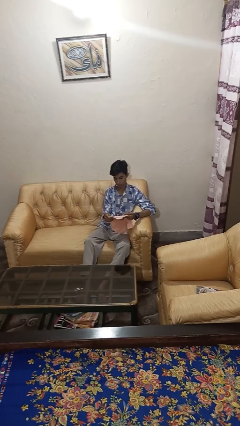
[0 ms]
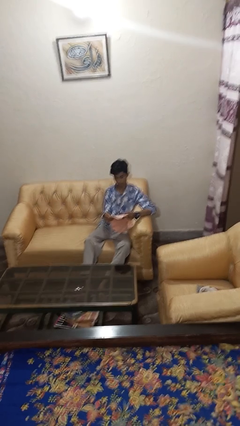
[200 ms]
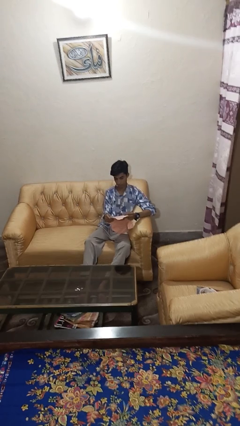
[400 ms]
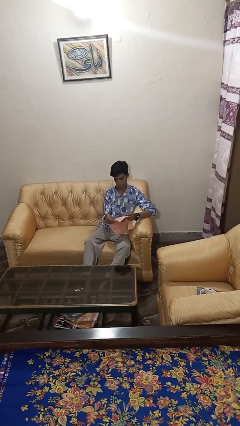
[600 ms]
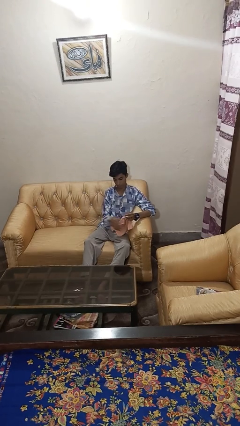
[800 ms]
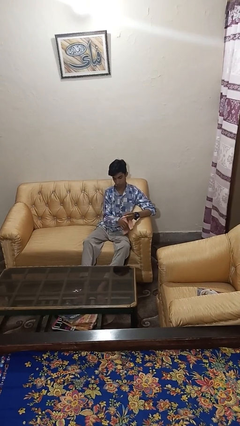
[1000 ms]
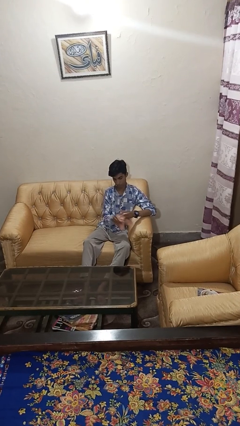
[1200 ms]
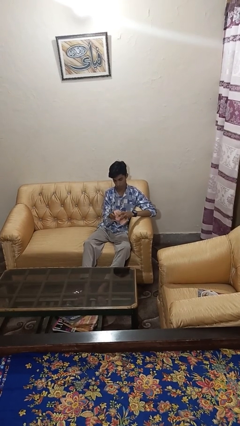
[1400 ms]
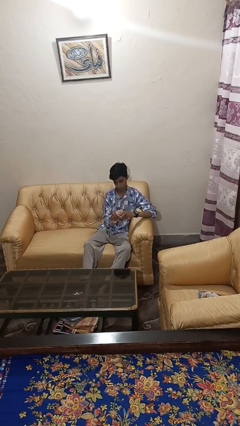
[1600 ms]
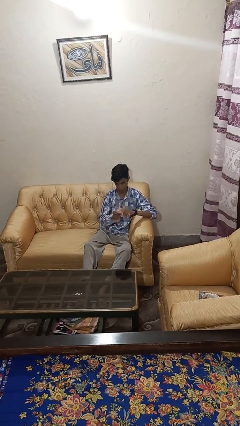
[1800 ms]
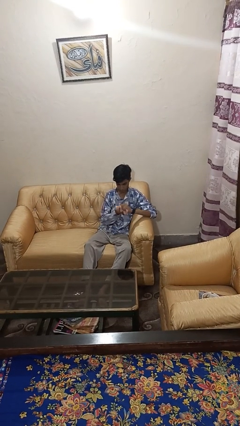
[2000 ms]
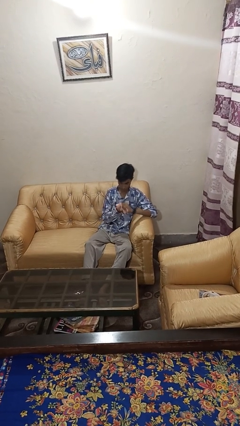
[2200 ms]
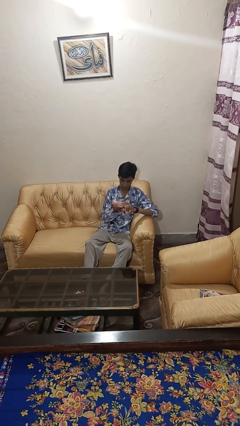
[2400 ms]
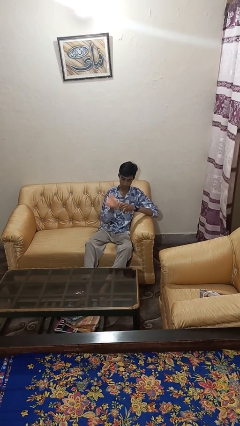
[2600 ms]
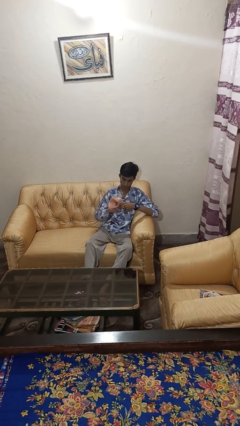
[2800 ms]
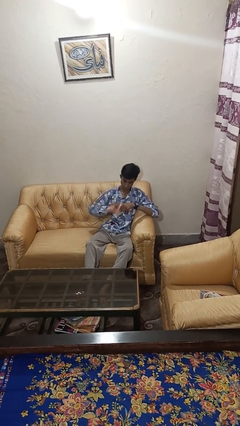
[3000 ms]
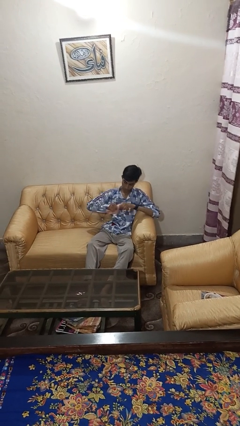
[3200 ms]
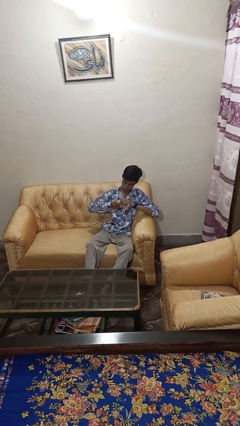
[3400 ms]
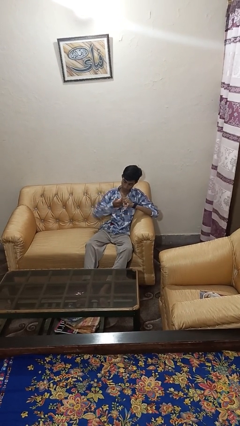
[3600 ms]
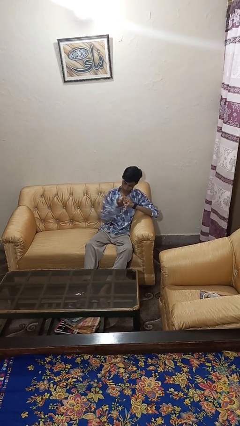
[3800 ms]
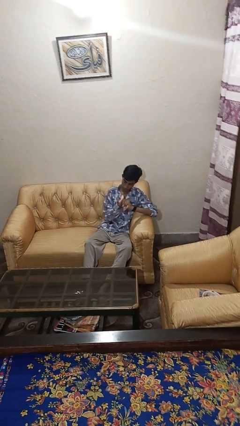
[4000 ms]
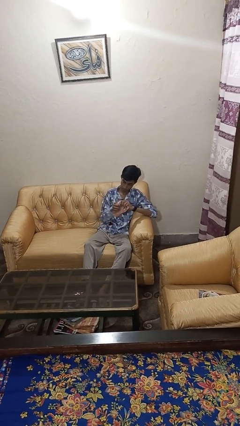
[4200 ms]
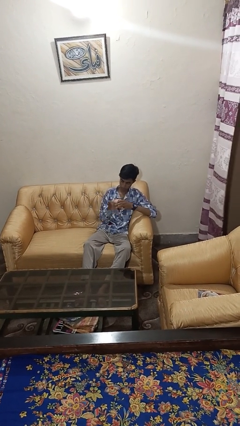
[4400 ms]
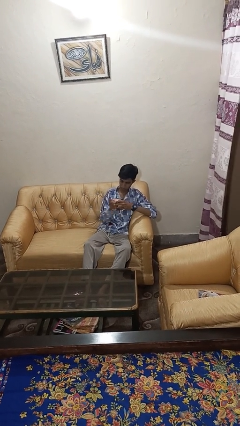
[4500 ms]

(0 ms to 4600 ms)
person squeezes object

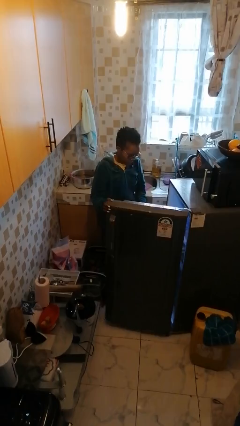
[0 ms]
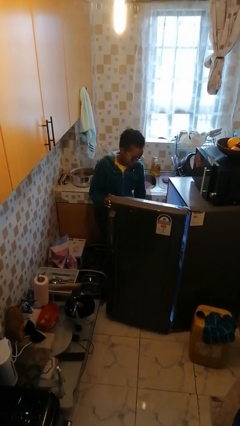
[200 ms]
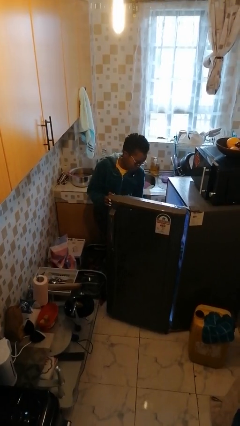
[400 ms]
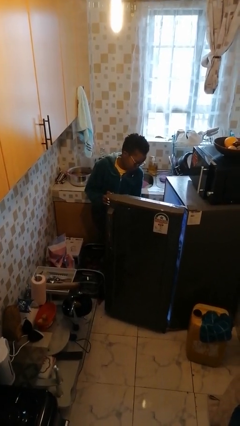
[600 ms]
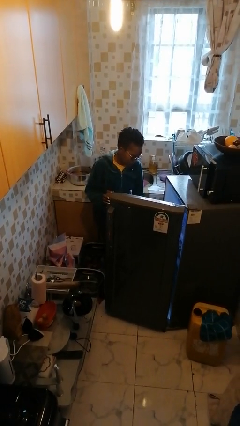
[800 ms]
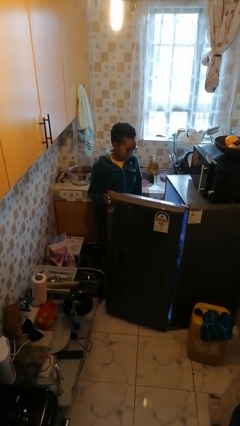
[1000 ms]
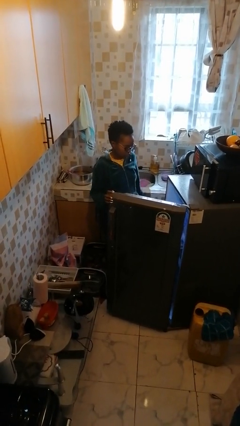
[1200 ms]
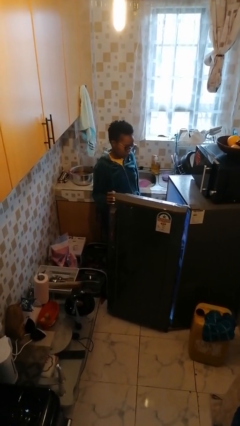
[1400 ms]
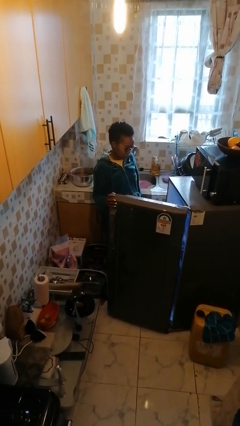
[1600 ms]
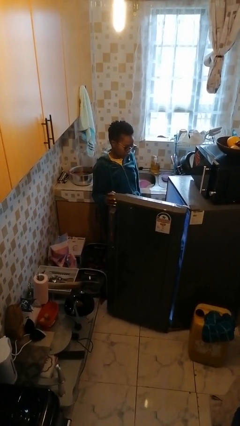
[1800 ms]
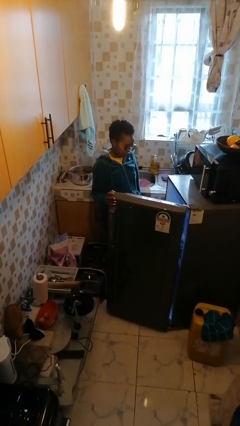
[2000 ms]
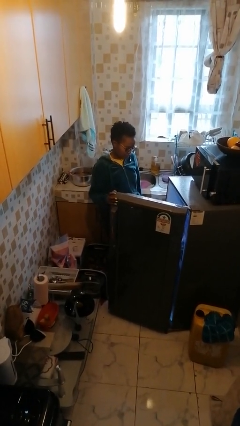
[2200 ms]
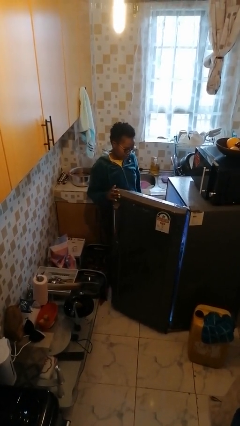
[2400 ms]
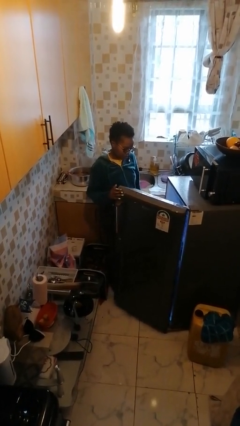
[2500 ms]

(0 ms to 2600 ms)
person puts object into refrigerator

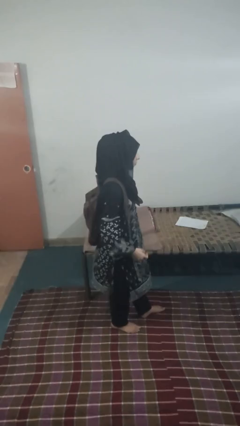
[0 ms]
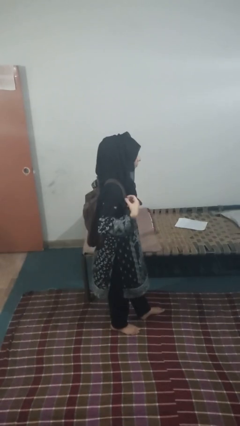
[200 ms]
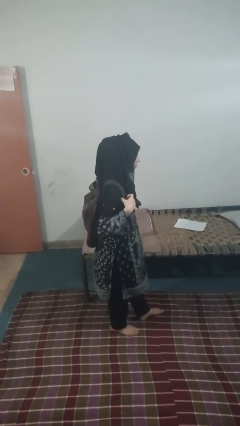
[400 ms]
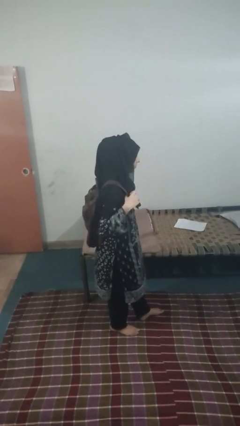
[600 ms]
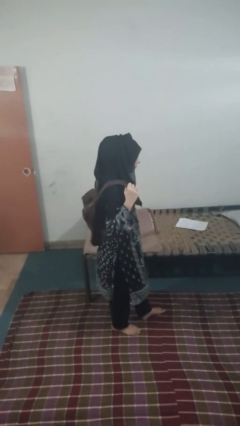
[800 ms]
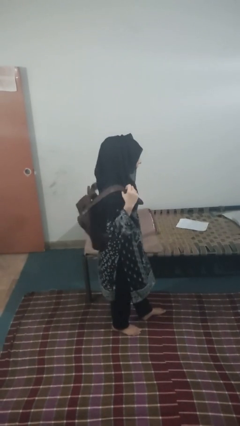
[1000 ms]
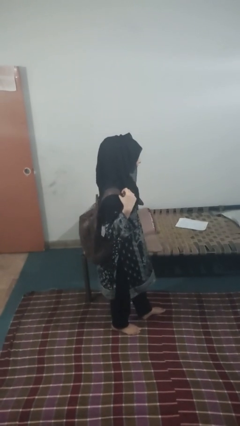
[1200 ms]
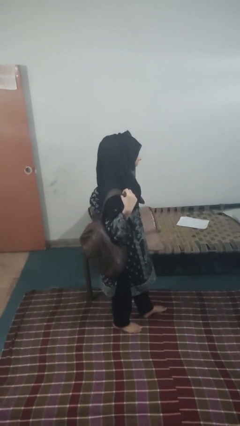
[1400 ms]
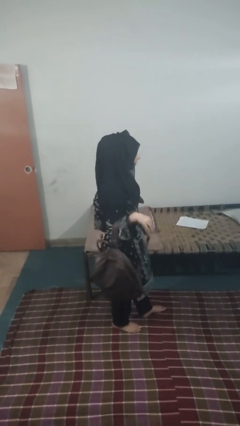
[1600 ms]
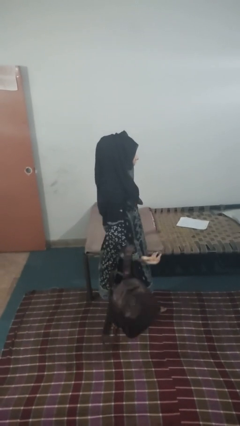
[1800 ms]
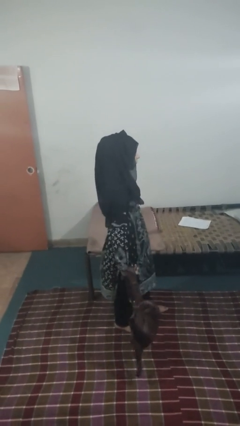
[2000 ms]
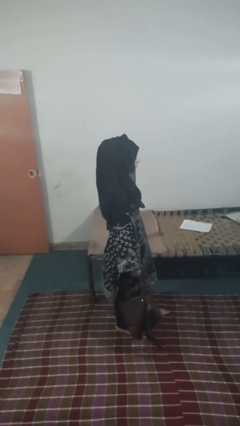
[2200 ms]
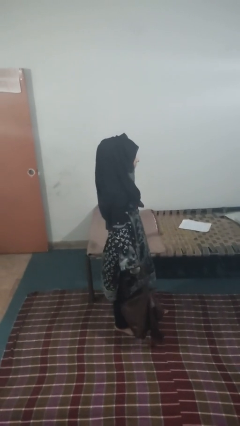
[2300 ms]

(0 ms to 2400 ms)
person takes off backpack

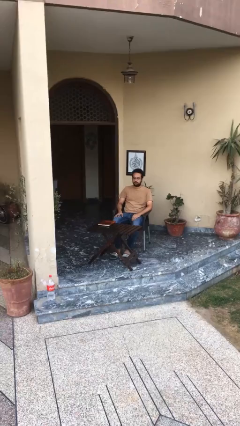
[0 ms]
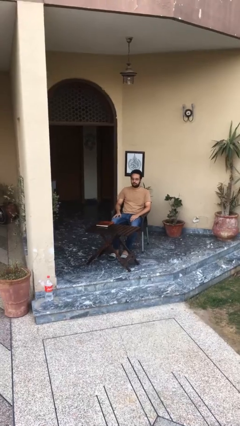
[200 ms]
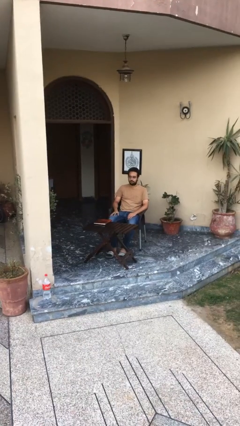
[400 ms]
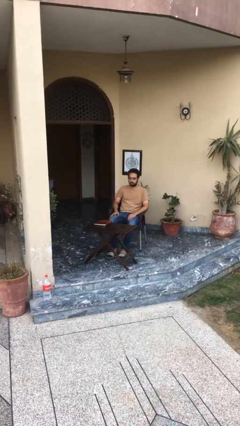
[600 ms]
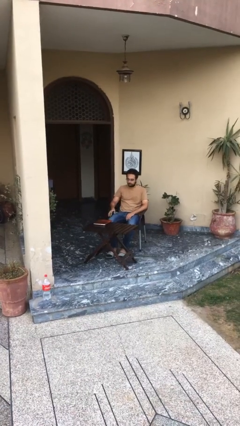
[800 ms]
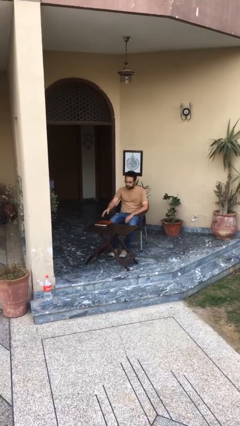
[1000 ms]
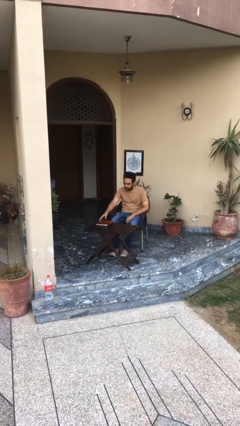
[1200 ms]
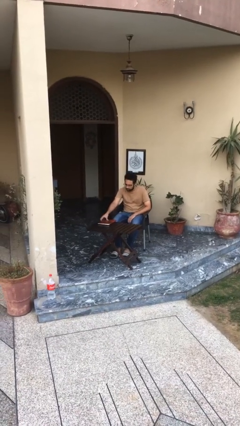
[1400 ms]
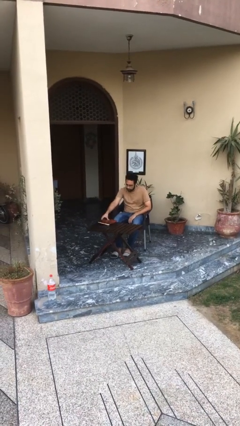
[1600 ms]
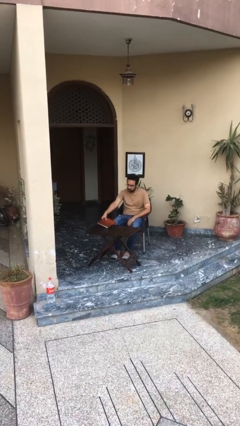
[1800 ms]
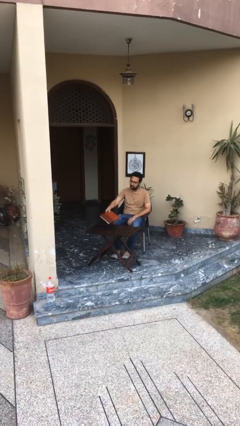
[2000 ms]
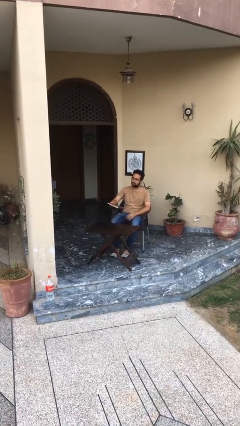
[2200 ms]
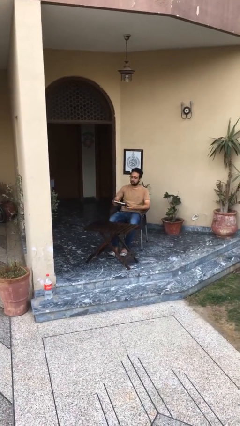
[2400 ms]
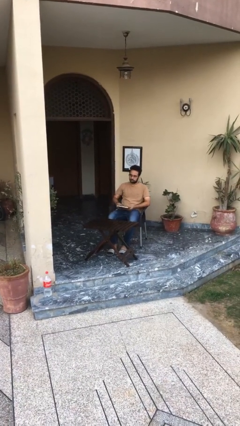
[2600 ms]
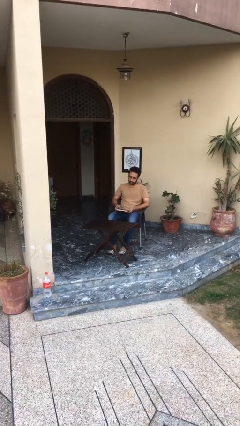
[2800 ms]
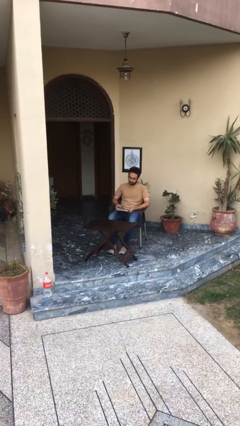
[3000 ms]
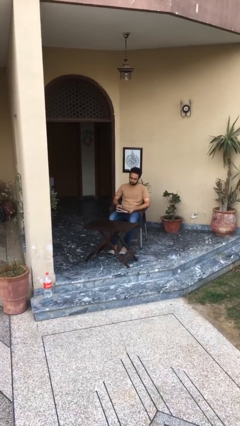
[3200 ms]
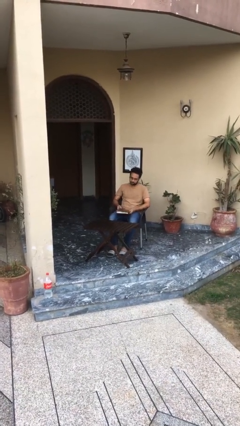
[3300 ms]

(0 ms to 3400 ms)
person picks up object from table

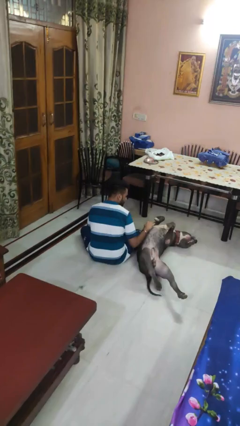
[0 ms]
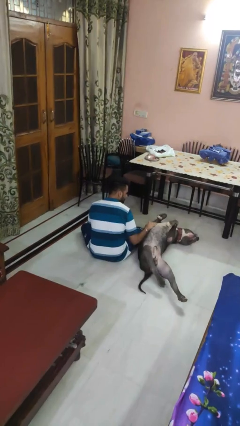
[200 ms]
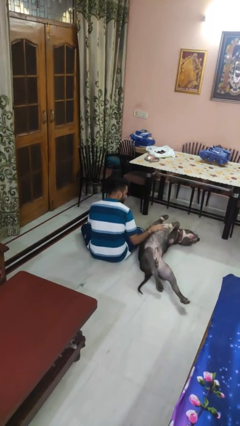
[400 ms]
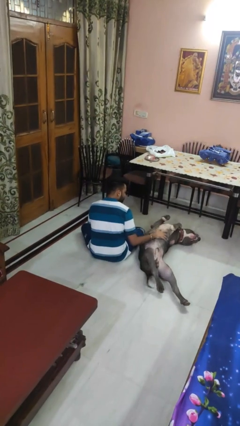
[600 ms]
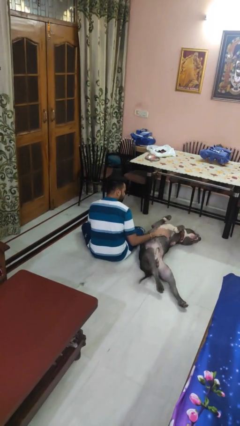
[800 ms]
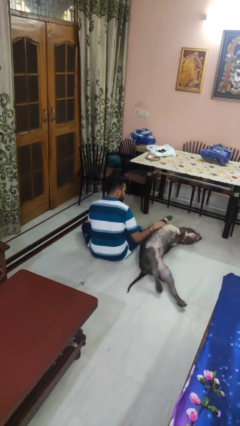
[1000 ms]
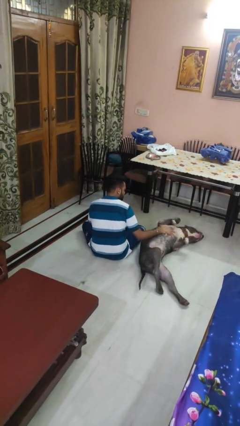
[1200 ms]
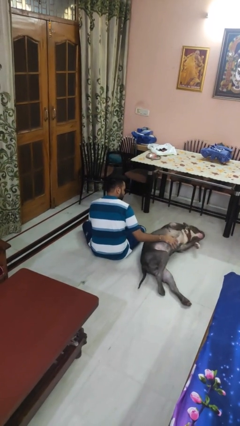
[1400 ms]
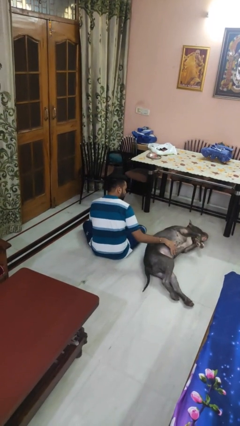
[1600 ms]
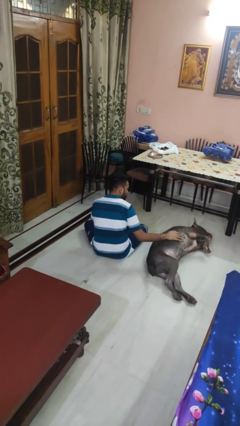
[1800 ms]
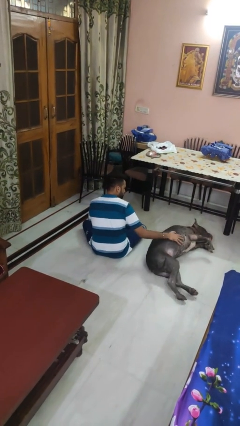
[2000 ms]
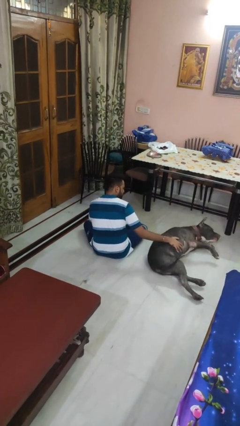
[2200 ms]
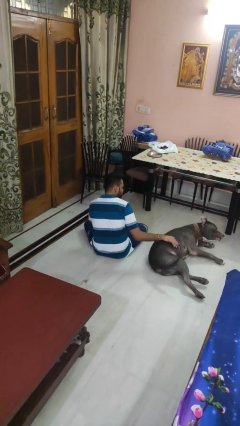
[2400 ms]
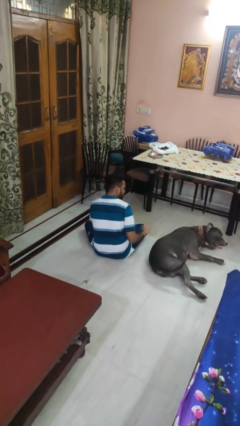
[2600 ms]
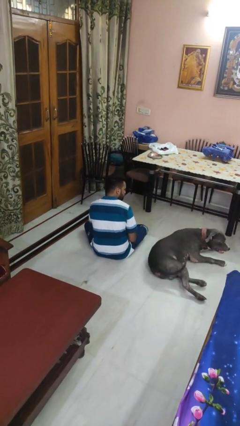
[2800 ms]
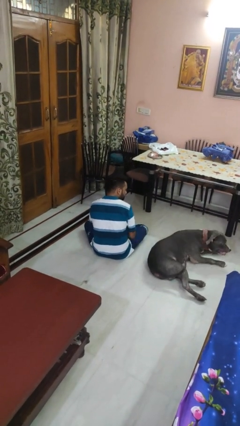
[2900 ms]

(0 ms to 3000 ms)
person pets dog

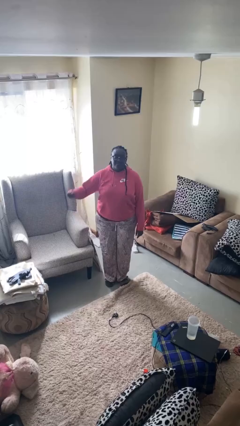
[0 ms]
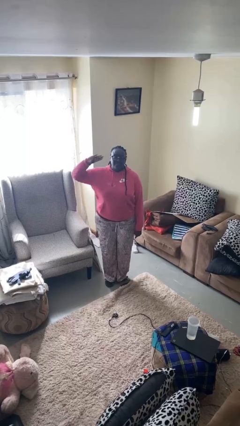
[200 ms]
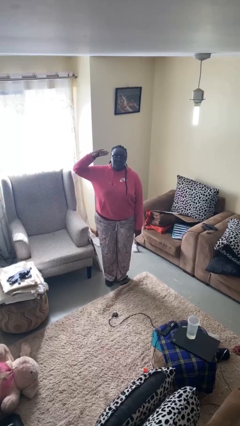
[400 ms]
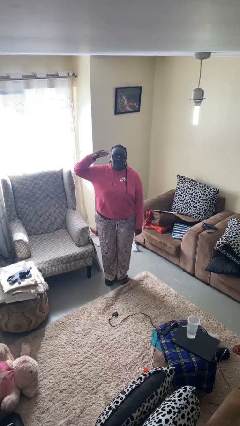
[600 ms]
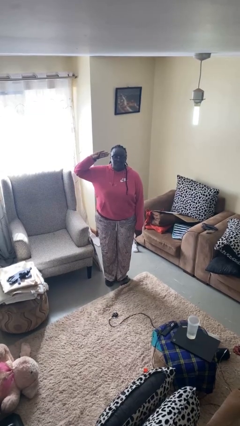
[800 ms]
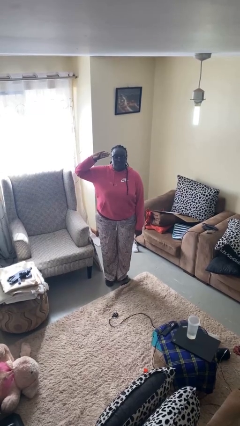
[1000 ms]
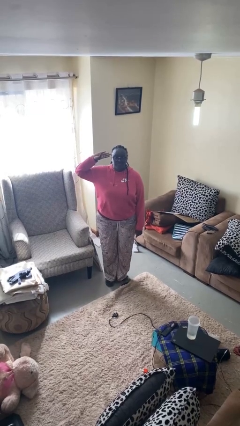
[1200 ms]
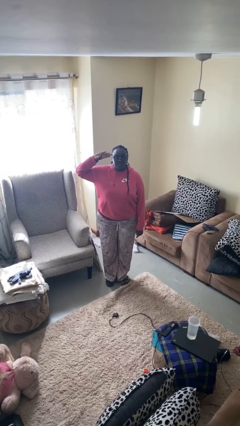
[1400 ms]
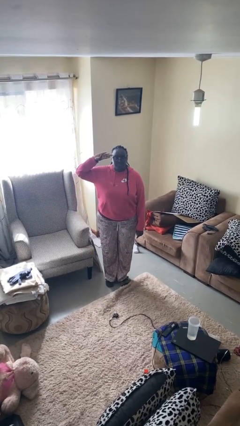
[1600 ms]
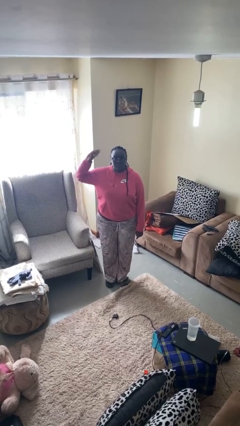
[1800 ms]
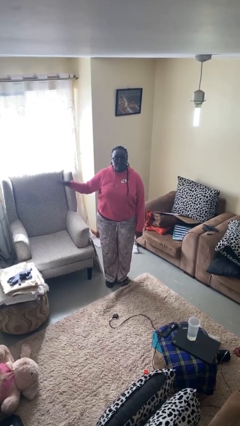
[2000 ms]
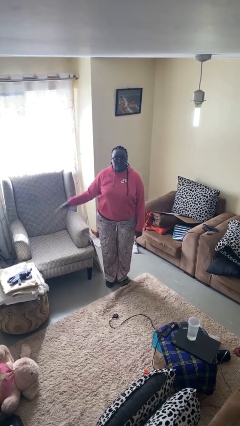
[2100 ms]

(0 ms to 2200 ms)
person salutes
